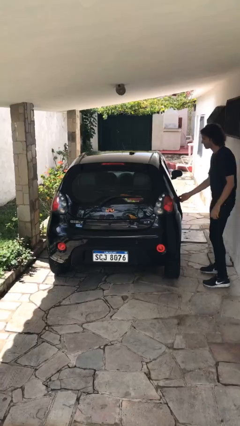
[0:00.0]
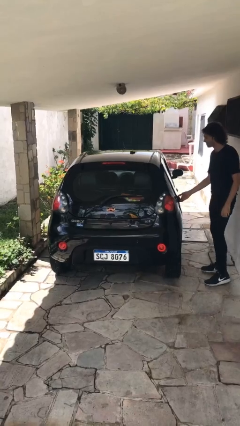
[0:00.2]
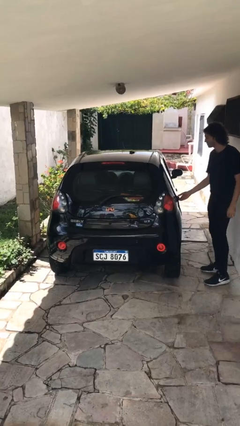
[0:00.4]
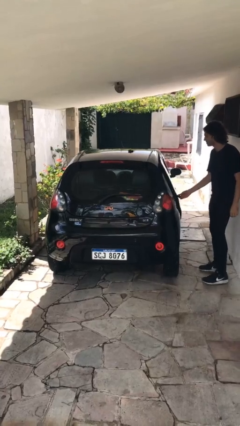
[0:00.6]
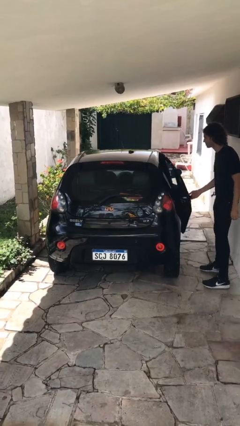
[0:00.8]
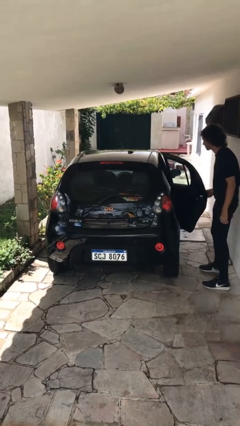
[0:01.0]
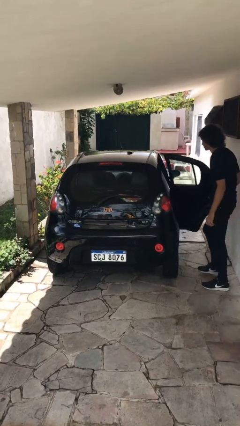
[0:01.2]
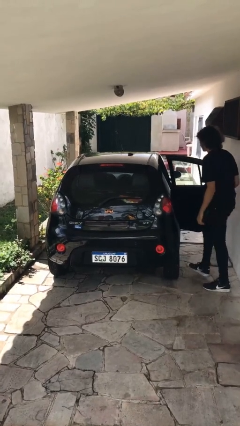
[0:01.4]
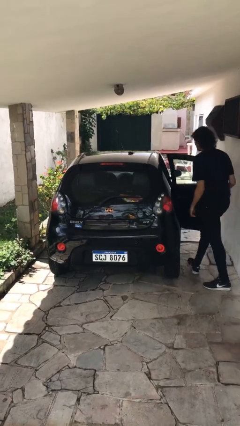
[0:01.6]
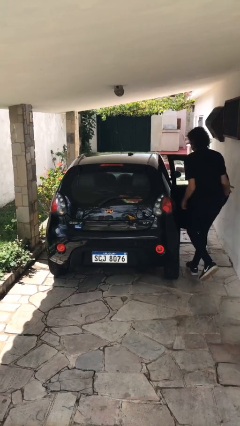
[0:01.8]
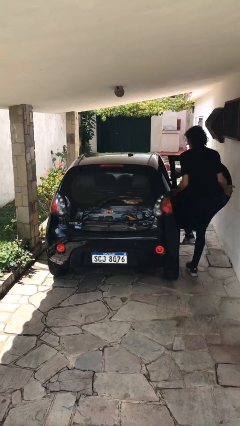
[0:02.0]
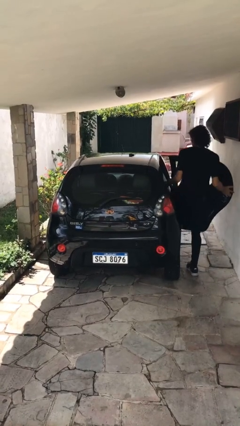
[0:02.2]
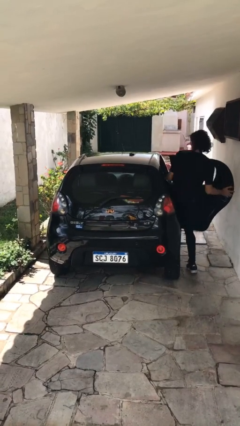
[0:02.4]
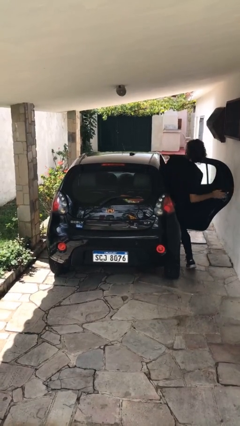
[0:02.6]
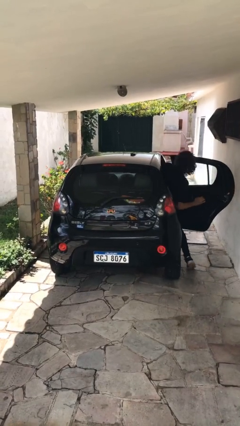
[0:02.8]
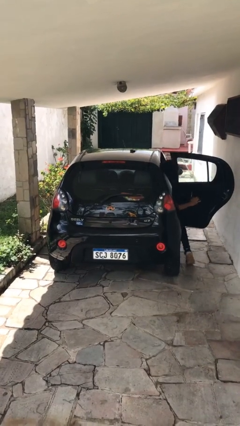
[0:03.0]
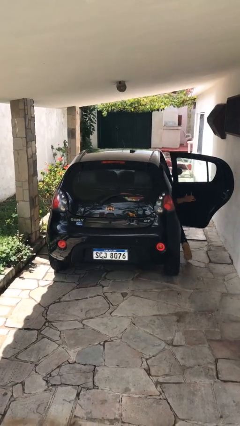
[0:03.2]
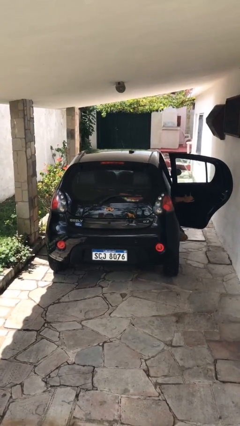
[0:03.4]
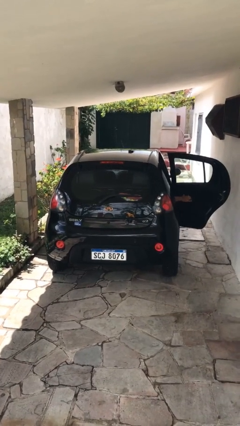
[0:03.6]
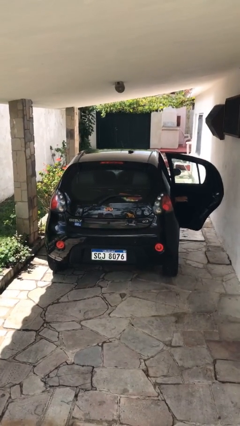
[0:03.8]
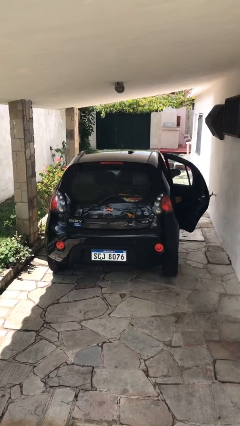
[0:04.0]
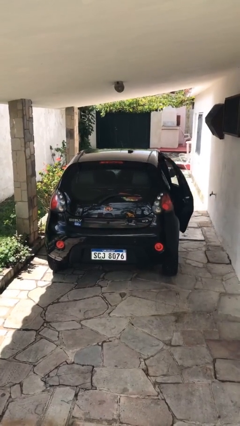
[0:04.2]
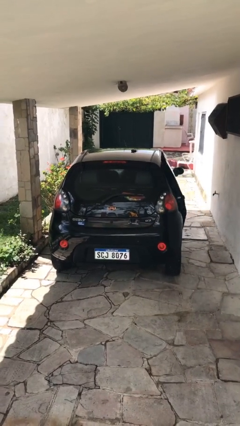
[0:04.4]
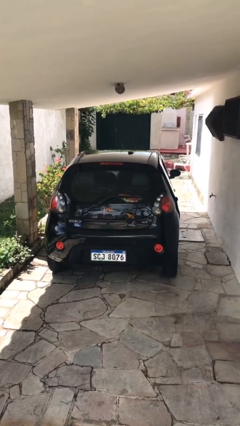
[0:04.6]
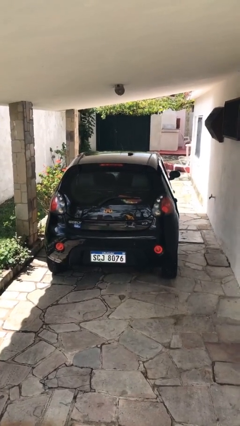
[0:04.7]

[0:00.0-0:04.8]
car picks up person

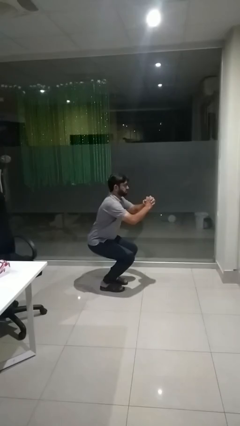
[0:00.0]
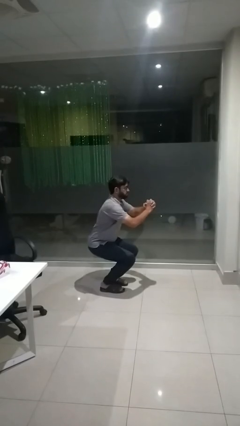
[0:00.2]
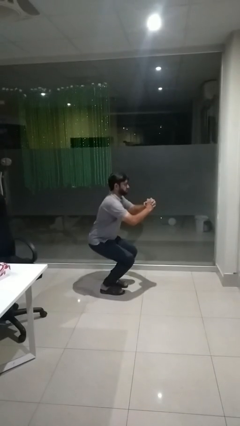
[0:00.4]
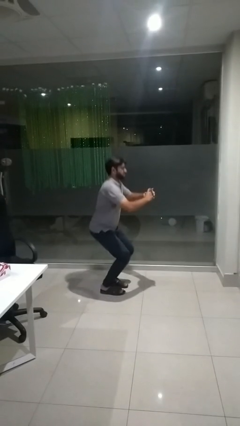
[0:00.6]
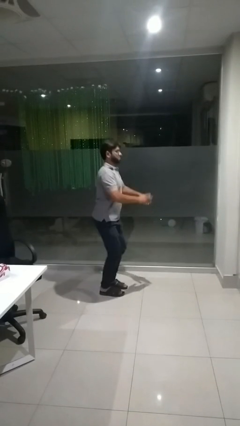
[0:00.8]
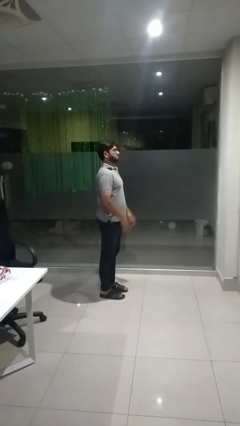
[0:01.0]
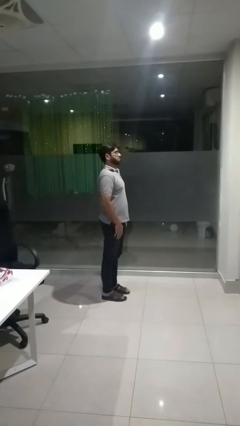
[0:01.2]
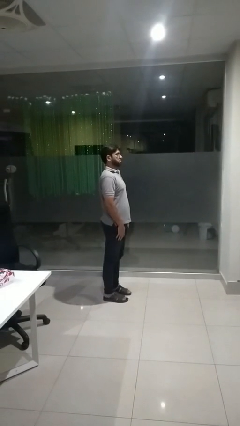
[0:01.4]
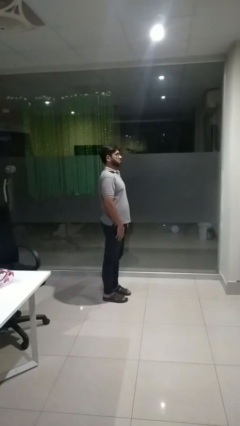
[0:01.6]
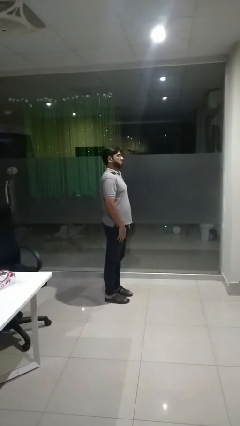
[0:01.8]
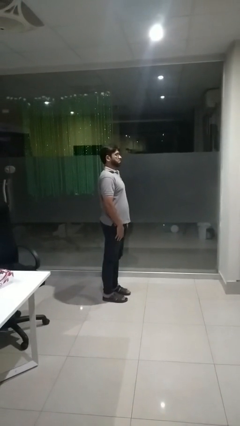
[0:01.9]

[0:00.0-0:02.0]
person stands up

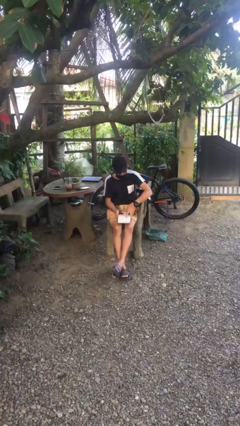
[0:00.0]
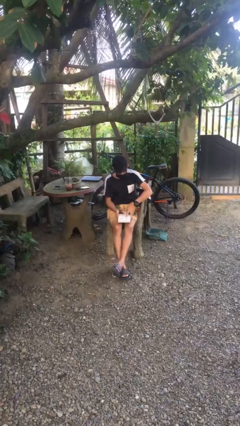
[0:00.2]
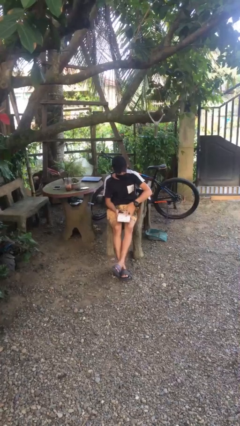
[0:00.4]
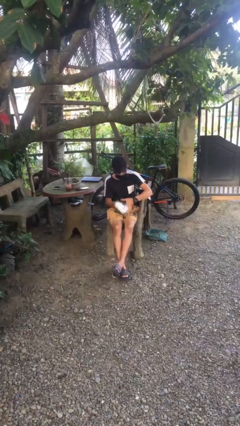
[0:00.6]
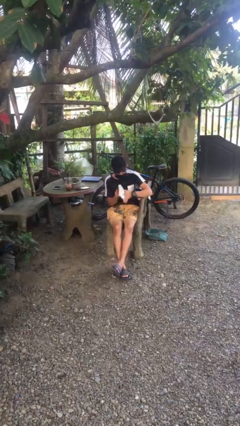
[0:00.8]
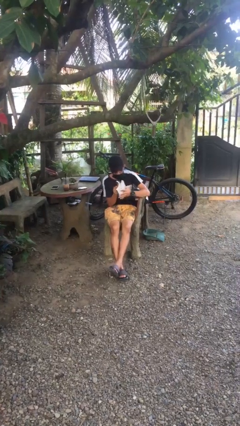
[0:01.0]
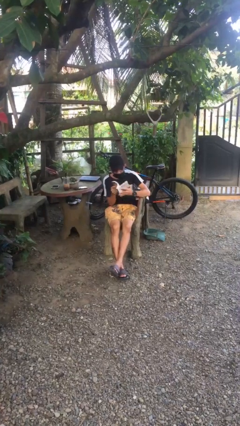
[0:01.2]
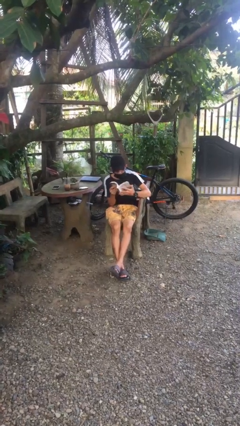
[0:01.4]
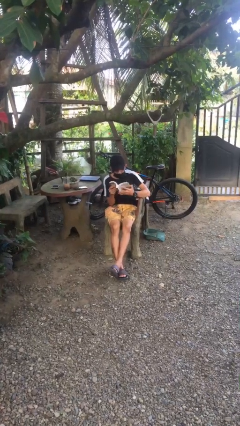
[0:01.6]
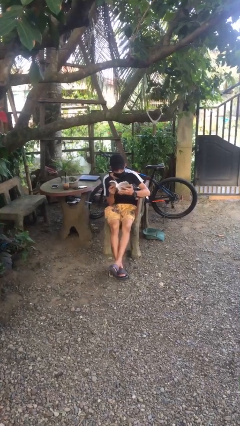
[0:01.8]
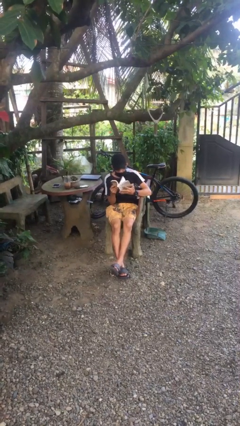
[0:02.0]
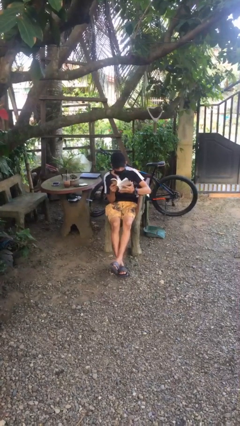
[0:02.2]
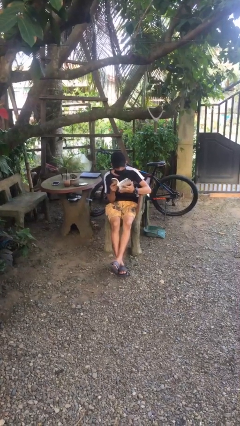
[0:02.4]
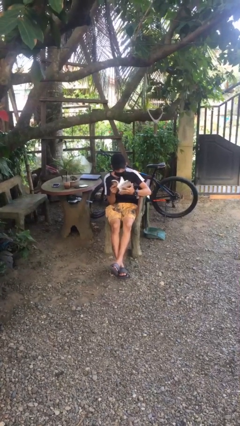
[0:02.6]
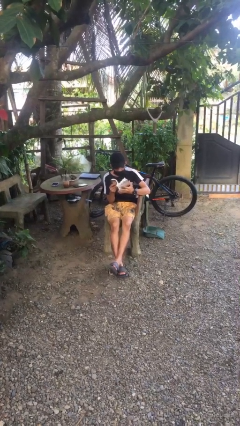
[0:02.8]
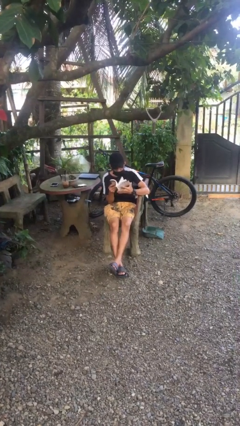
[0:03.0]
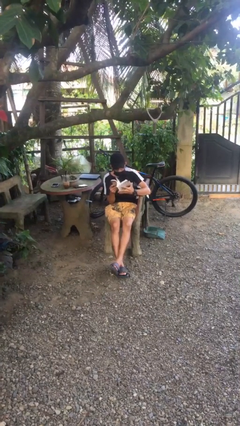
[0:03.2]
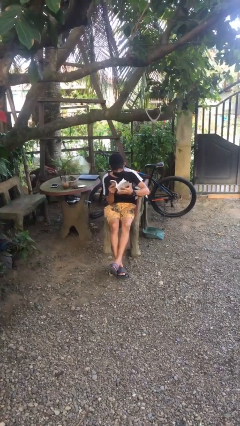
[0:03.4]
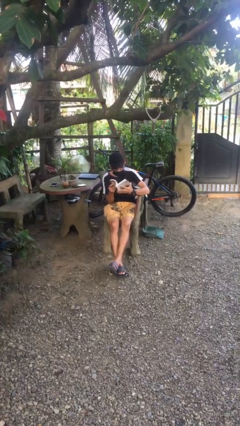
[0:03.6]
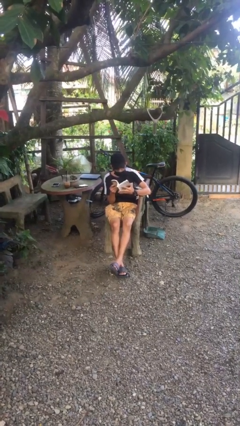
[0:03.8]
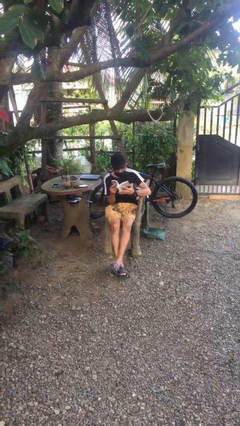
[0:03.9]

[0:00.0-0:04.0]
person reads document

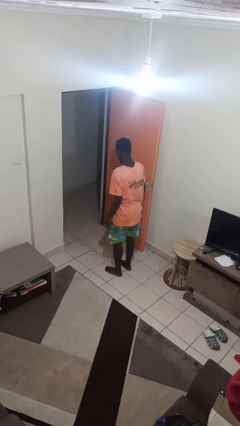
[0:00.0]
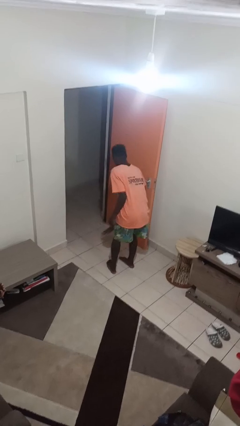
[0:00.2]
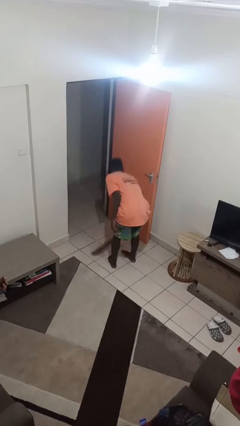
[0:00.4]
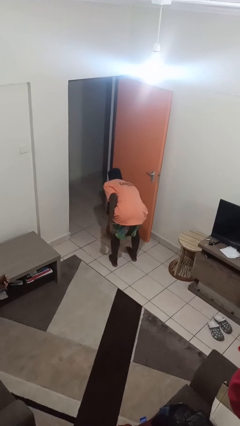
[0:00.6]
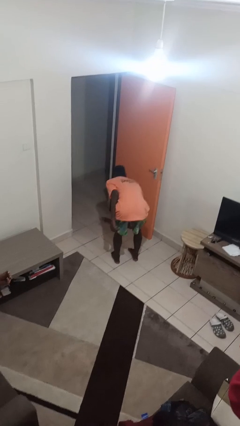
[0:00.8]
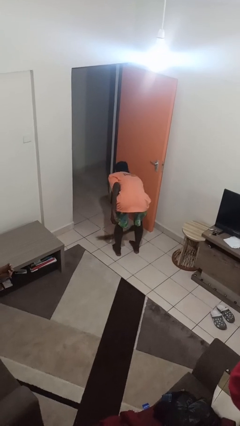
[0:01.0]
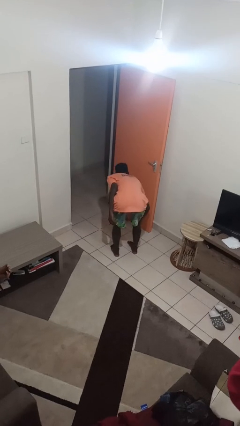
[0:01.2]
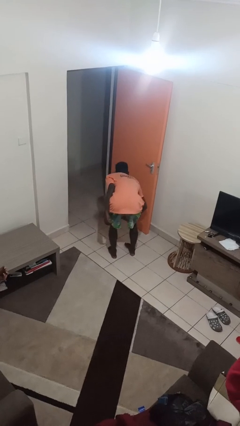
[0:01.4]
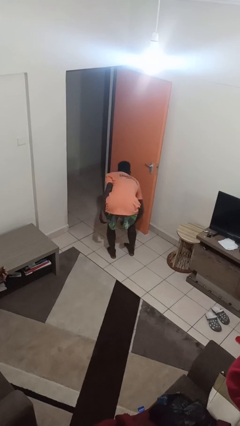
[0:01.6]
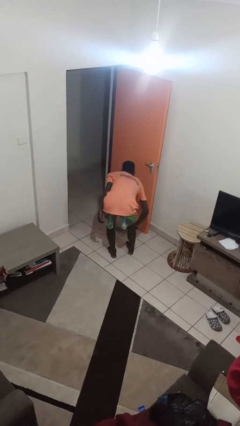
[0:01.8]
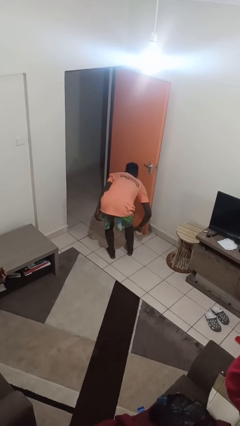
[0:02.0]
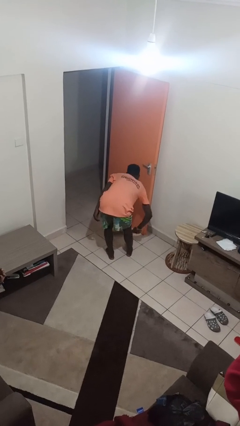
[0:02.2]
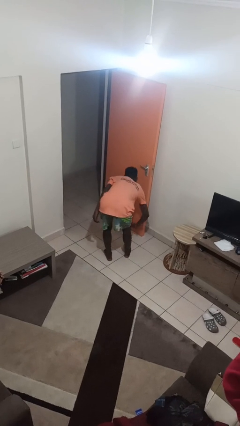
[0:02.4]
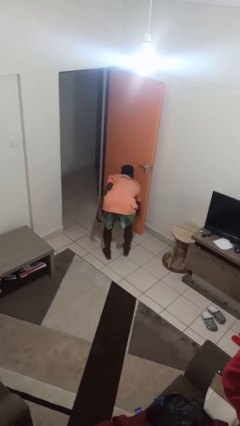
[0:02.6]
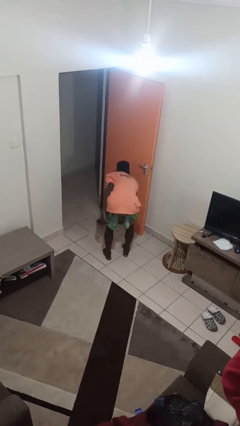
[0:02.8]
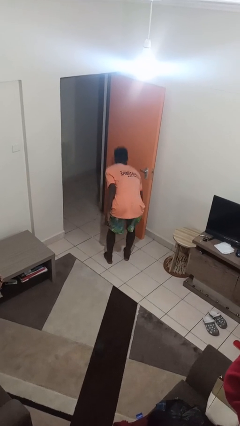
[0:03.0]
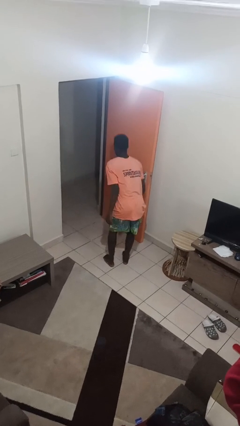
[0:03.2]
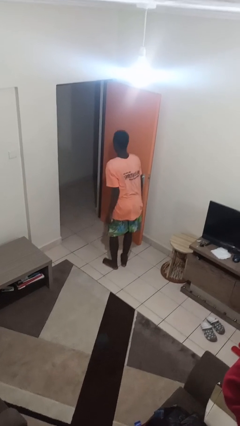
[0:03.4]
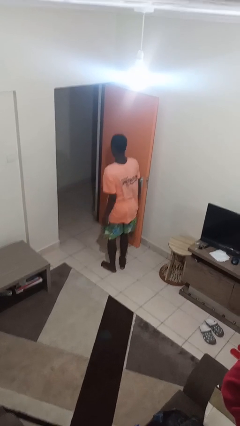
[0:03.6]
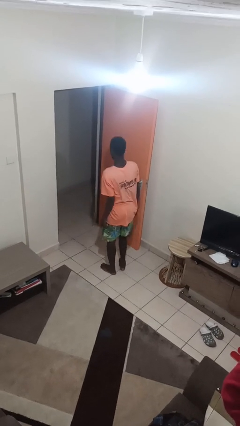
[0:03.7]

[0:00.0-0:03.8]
person sweeps floor

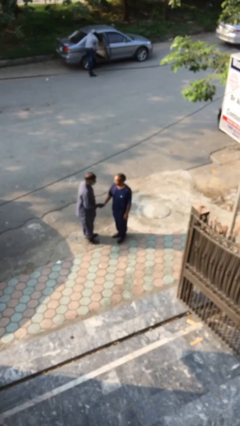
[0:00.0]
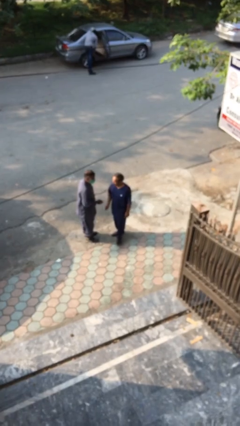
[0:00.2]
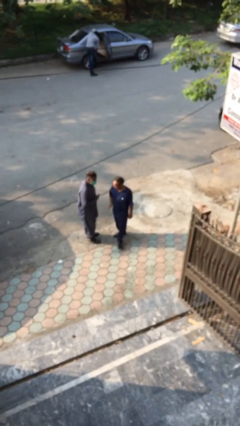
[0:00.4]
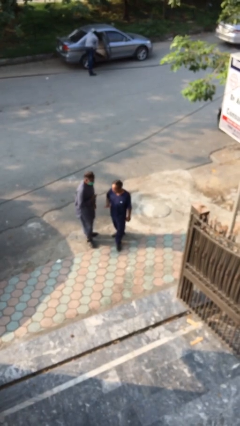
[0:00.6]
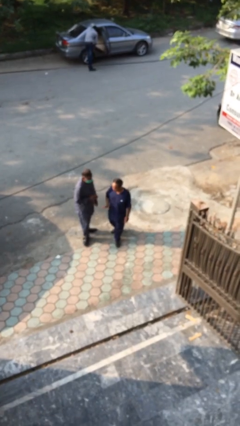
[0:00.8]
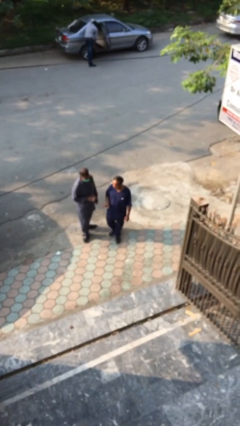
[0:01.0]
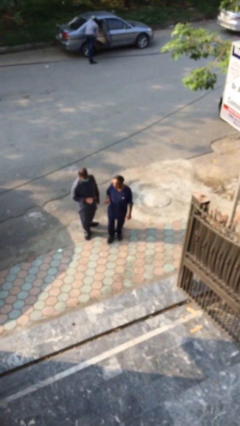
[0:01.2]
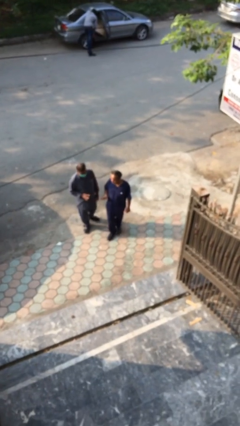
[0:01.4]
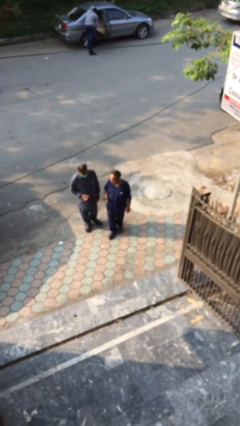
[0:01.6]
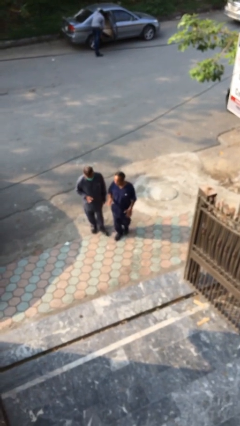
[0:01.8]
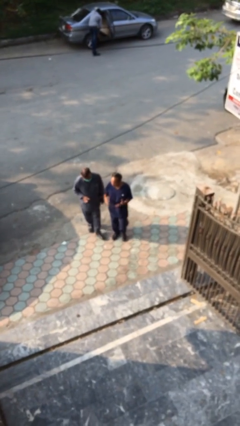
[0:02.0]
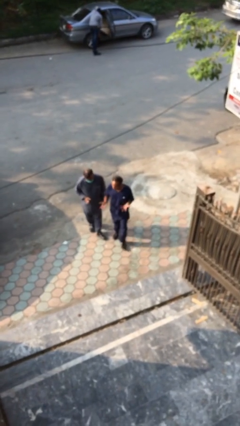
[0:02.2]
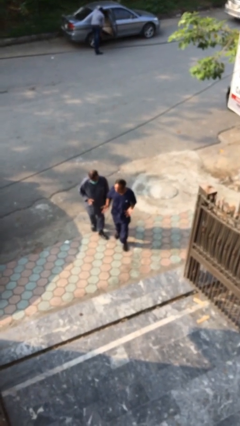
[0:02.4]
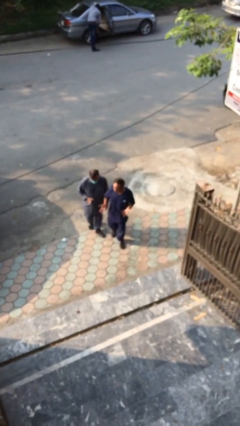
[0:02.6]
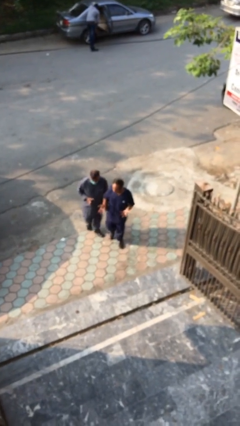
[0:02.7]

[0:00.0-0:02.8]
person talks to person

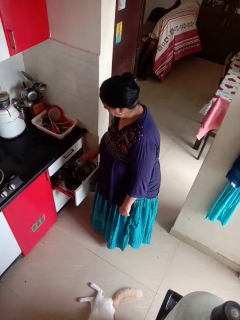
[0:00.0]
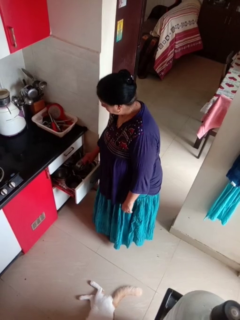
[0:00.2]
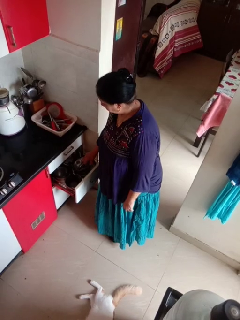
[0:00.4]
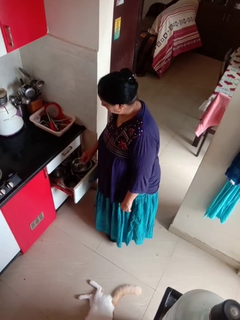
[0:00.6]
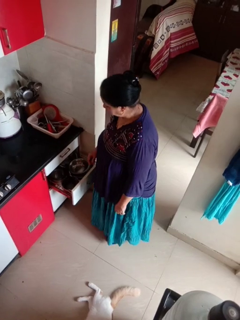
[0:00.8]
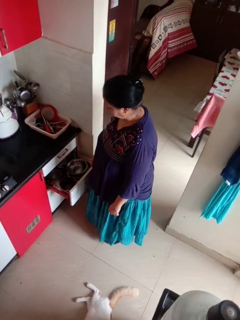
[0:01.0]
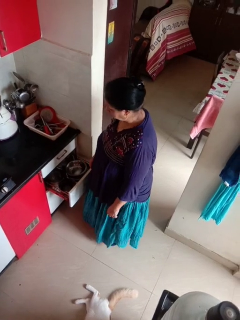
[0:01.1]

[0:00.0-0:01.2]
person puts object into kitchen drawer
